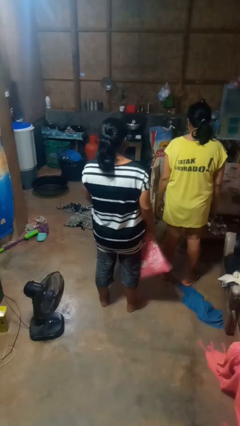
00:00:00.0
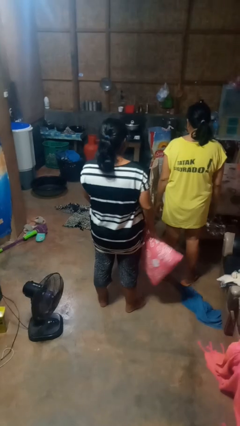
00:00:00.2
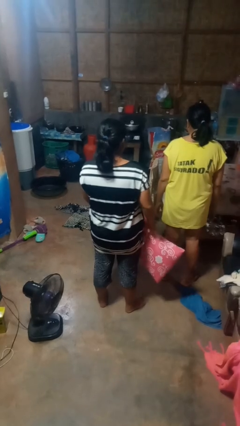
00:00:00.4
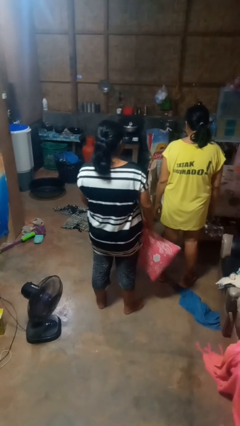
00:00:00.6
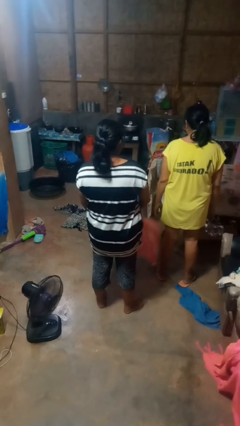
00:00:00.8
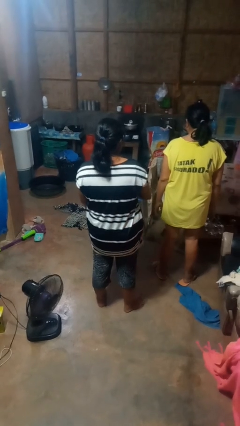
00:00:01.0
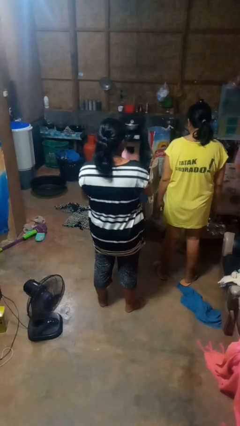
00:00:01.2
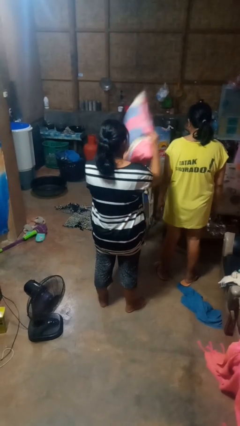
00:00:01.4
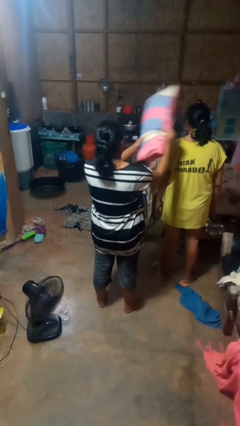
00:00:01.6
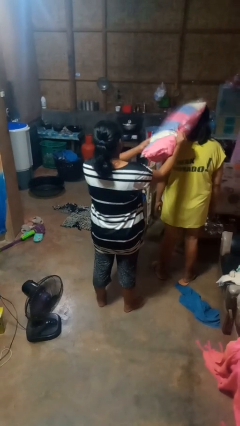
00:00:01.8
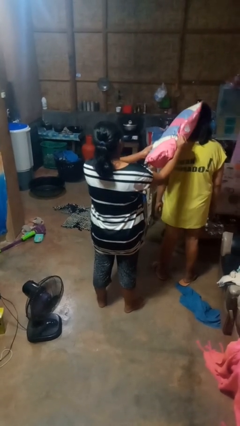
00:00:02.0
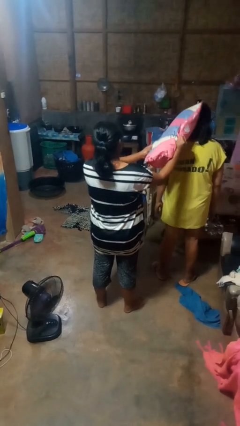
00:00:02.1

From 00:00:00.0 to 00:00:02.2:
person hits person with pillow

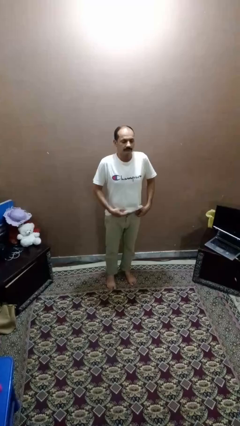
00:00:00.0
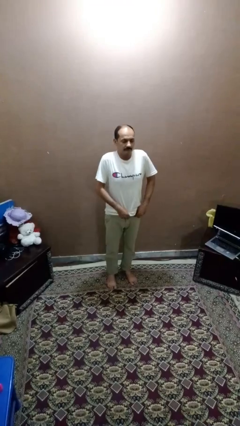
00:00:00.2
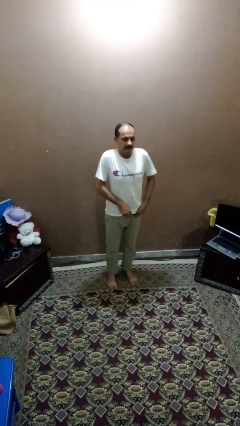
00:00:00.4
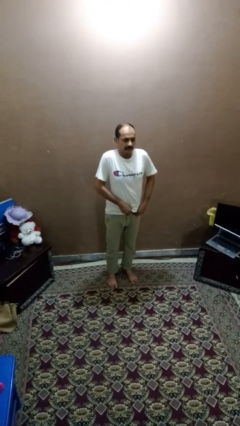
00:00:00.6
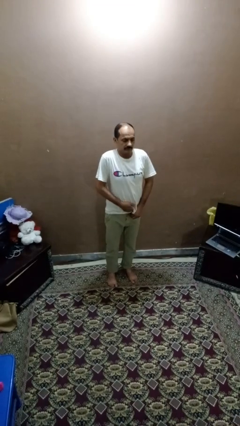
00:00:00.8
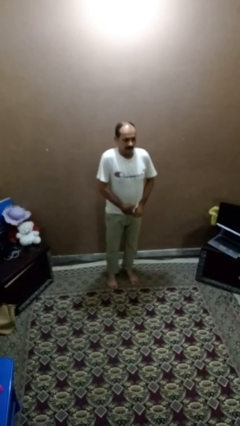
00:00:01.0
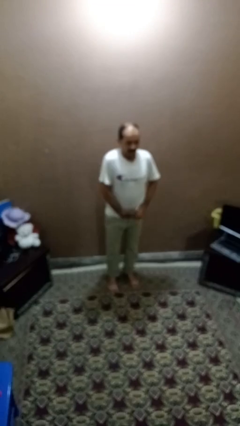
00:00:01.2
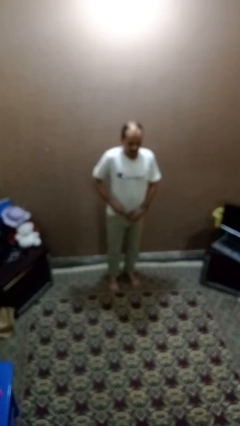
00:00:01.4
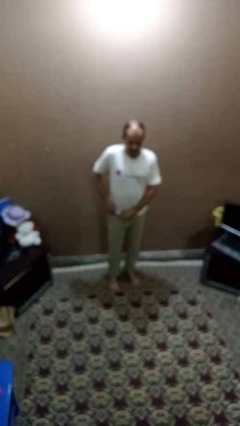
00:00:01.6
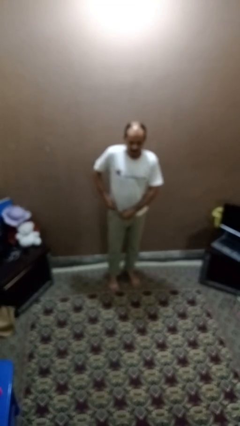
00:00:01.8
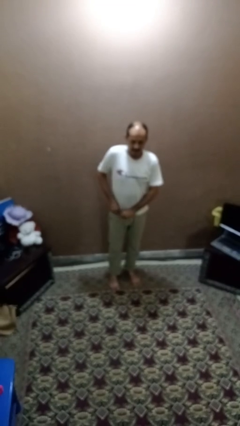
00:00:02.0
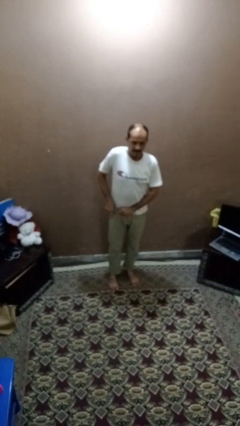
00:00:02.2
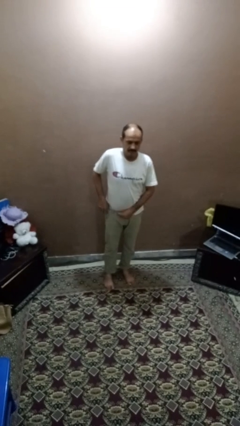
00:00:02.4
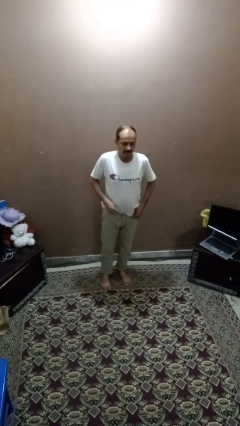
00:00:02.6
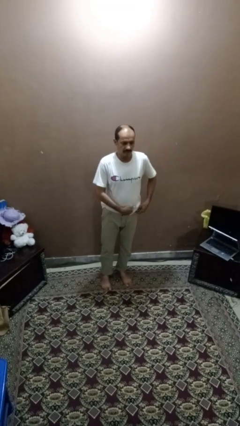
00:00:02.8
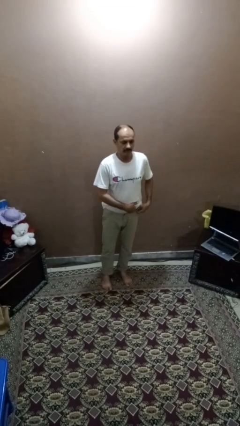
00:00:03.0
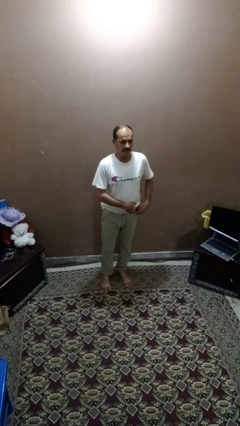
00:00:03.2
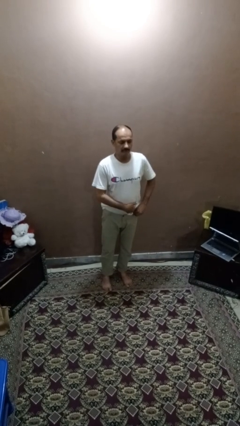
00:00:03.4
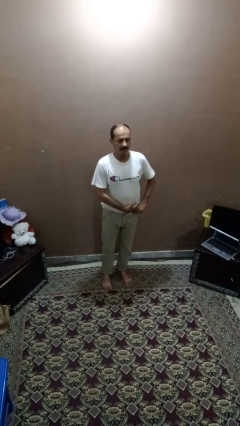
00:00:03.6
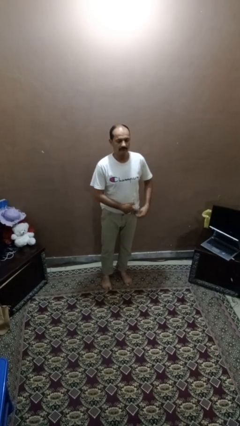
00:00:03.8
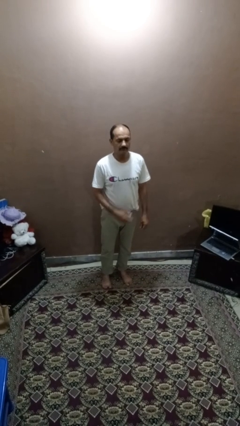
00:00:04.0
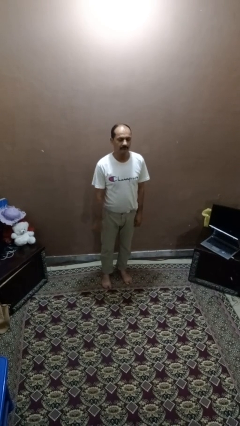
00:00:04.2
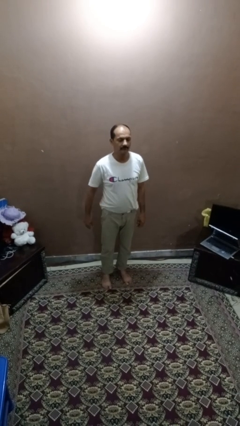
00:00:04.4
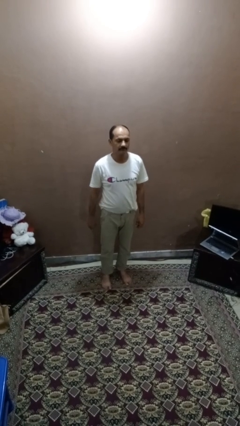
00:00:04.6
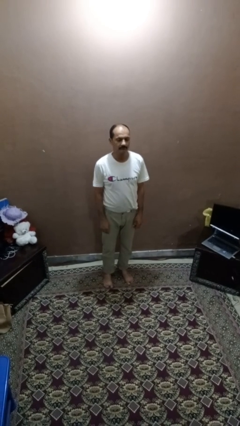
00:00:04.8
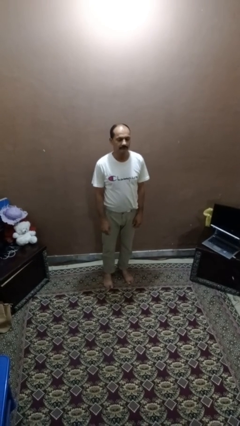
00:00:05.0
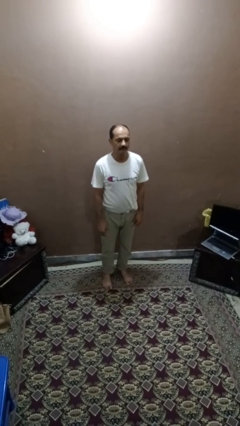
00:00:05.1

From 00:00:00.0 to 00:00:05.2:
person tucks in shirt

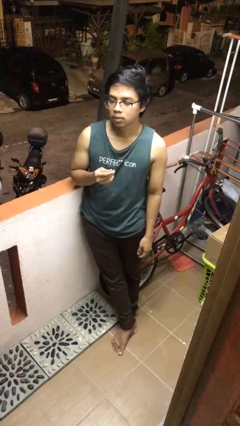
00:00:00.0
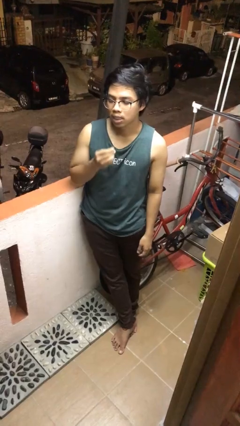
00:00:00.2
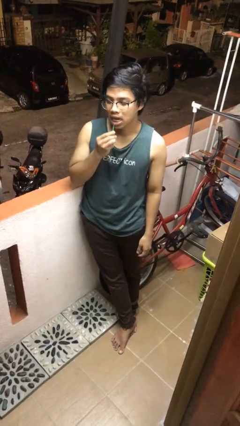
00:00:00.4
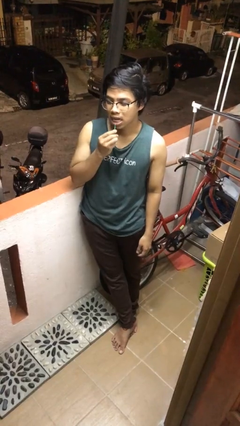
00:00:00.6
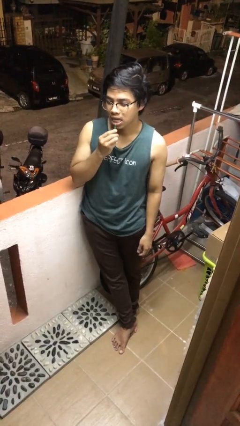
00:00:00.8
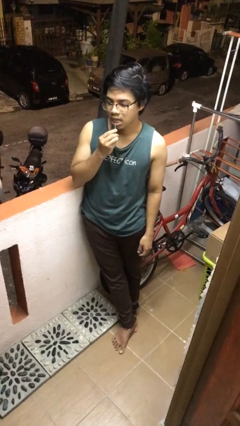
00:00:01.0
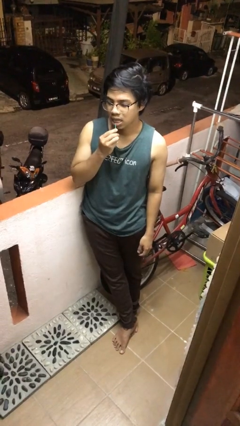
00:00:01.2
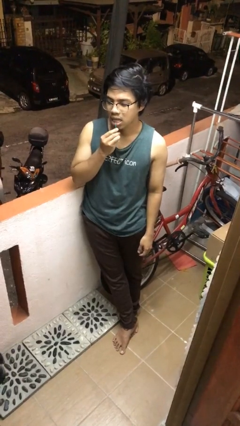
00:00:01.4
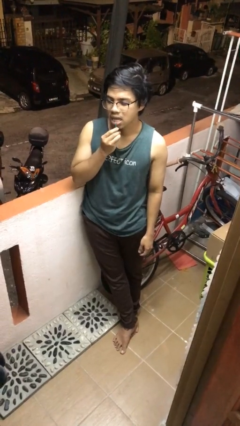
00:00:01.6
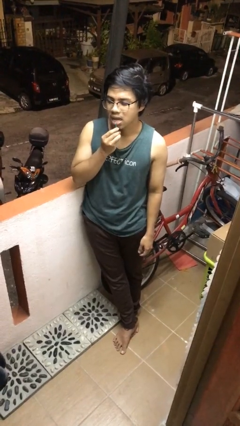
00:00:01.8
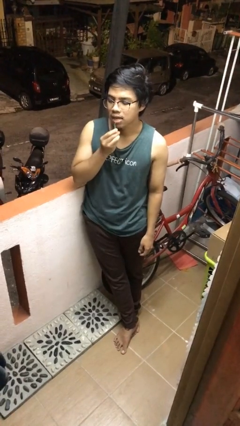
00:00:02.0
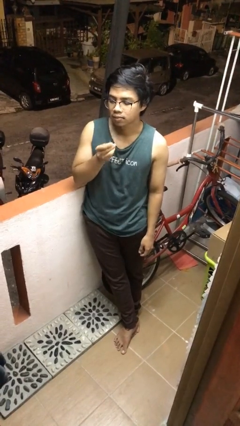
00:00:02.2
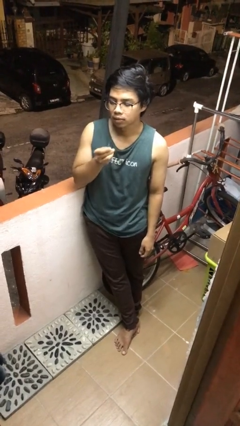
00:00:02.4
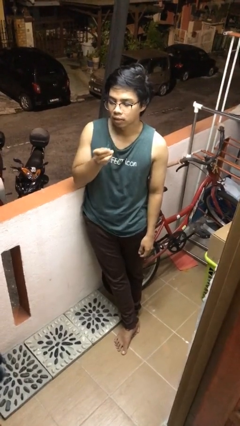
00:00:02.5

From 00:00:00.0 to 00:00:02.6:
person flosses

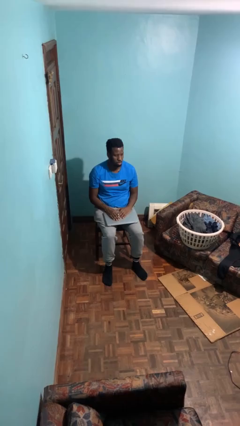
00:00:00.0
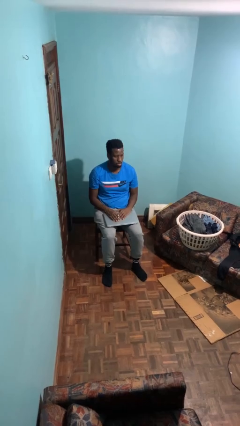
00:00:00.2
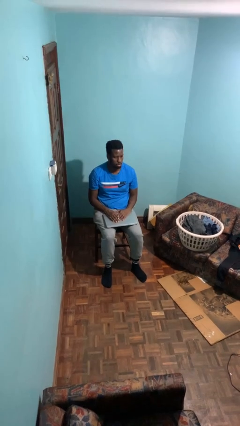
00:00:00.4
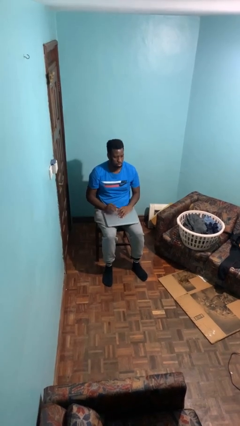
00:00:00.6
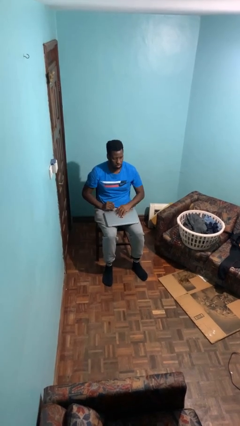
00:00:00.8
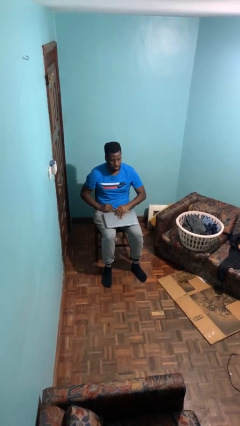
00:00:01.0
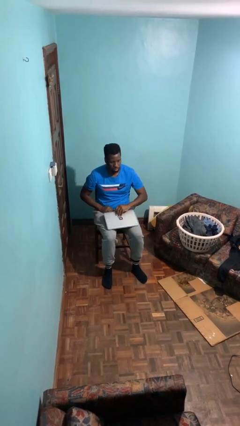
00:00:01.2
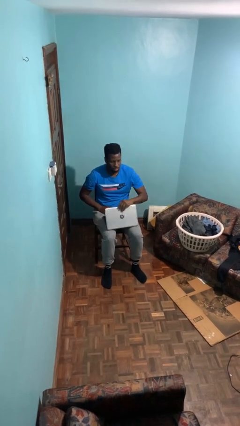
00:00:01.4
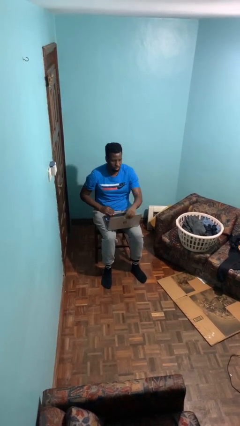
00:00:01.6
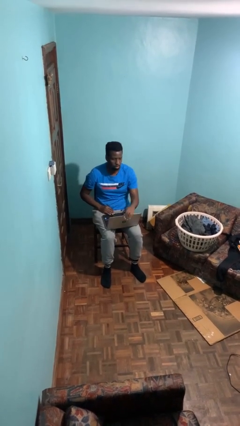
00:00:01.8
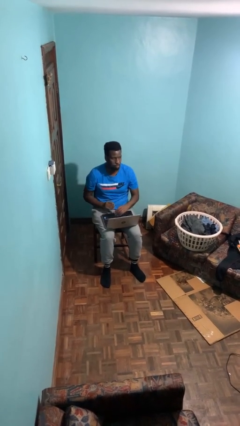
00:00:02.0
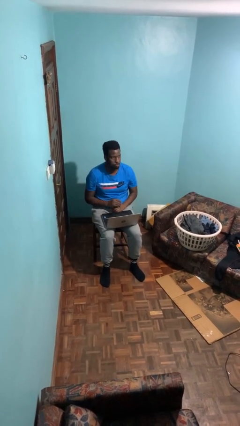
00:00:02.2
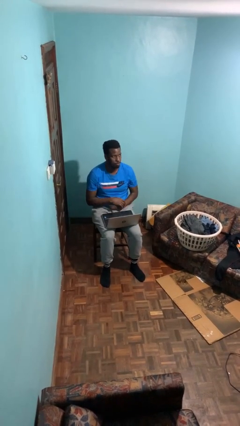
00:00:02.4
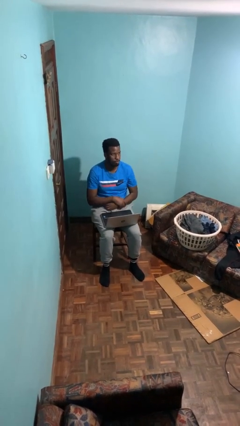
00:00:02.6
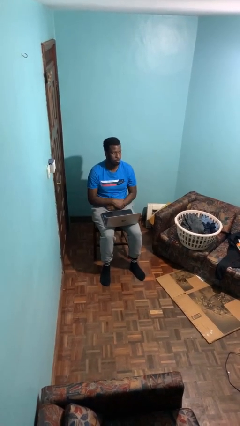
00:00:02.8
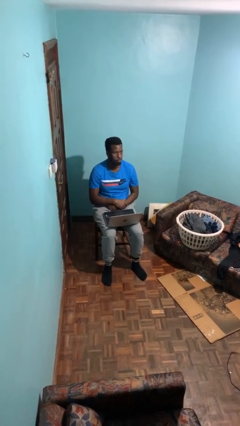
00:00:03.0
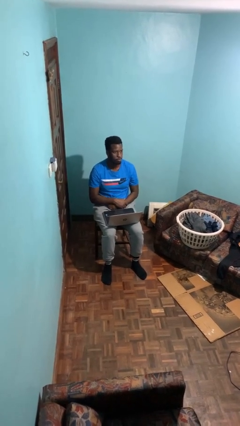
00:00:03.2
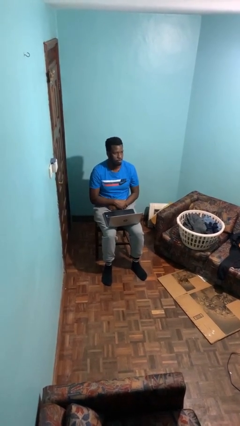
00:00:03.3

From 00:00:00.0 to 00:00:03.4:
person opens laptop

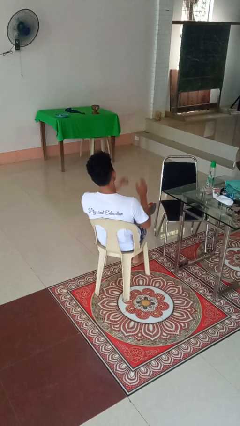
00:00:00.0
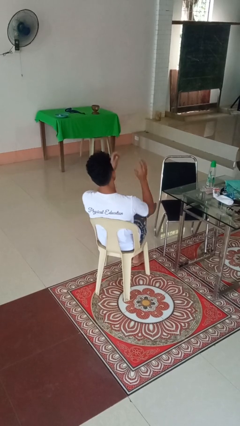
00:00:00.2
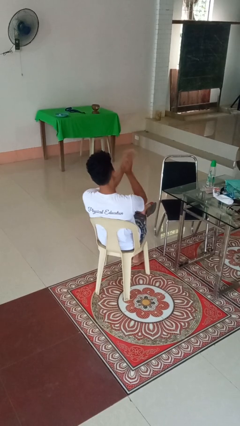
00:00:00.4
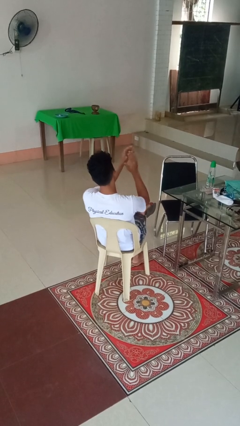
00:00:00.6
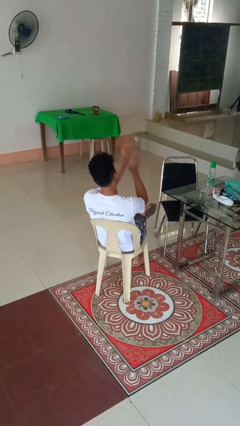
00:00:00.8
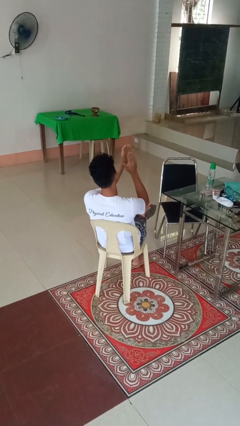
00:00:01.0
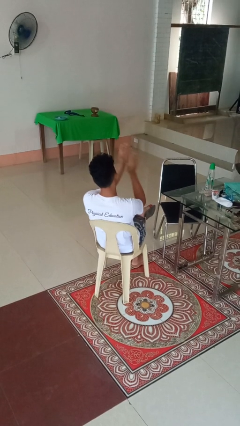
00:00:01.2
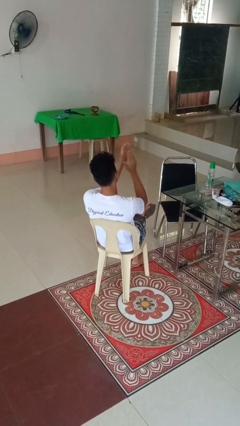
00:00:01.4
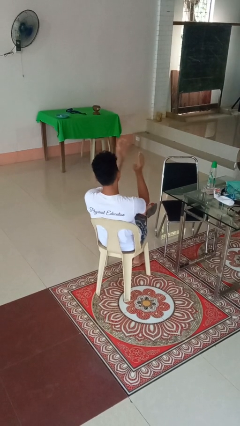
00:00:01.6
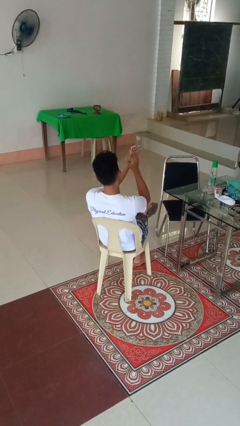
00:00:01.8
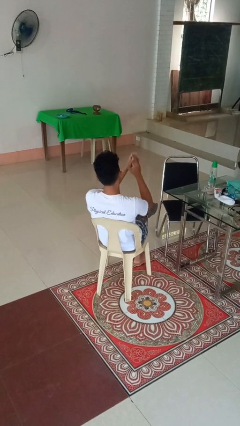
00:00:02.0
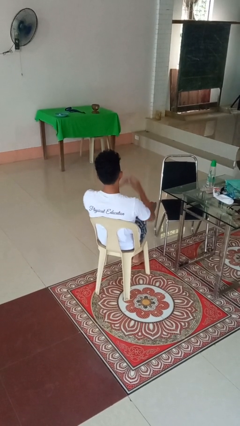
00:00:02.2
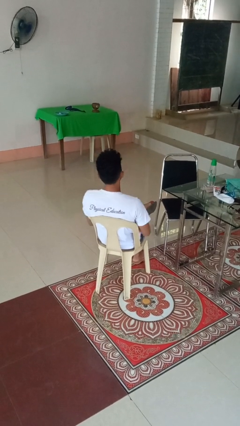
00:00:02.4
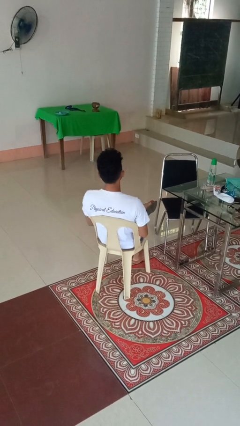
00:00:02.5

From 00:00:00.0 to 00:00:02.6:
person claps hands

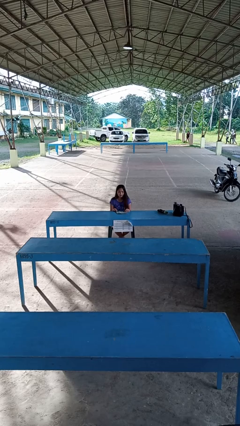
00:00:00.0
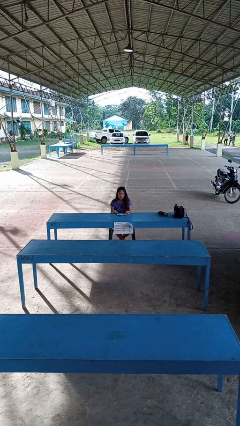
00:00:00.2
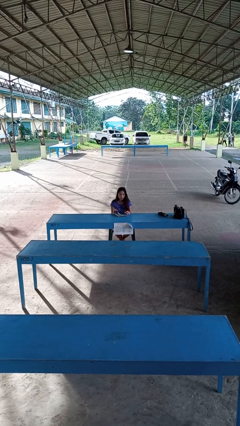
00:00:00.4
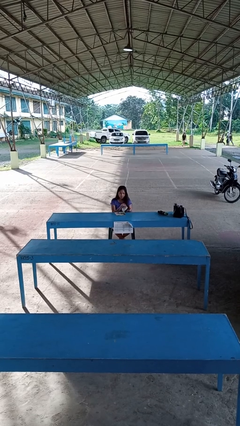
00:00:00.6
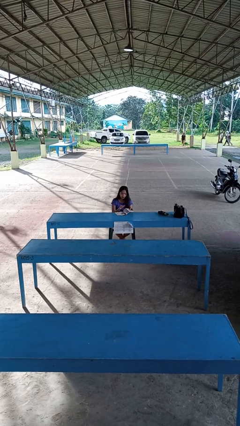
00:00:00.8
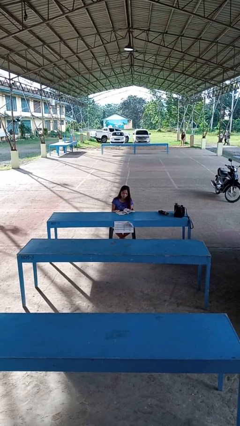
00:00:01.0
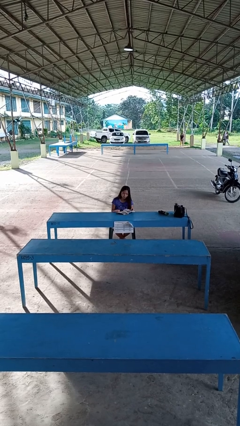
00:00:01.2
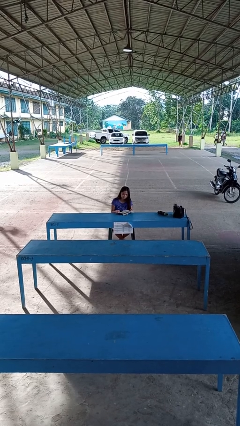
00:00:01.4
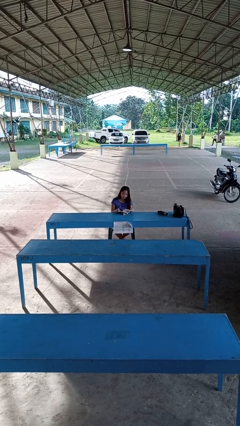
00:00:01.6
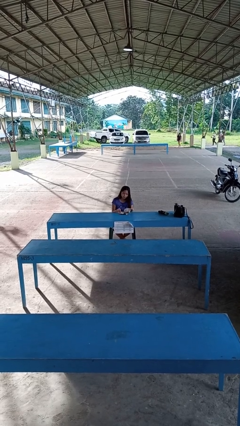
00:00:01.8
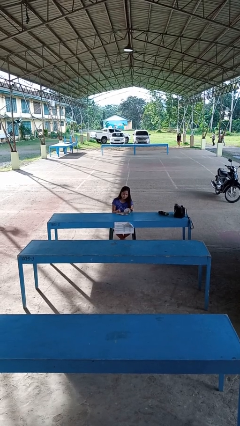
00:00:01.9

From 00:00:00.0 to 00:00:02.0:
person reads magazine
